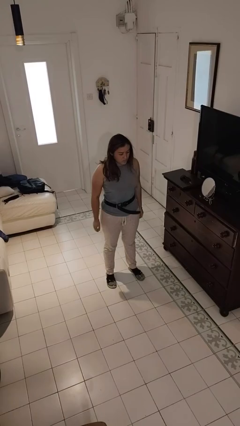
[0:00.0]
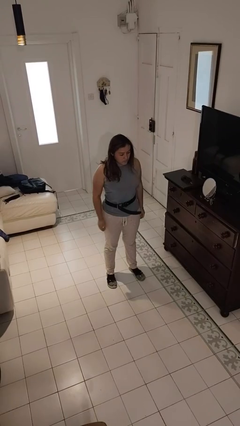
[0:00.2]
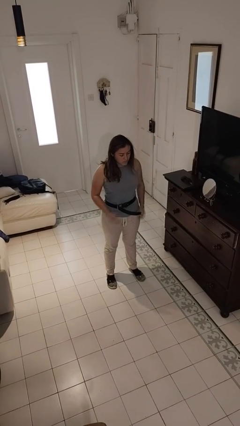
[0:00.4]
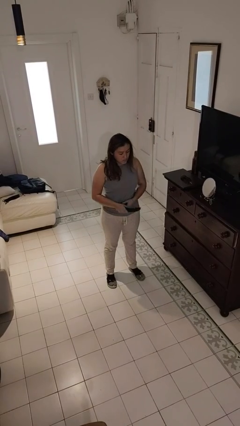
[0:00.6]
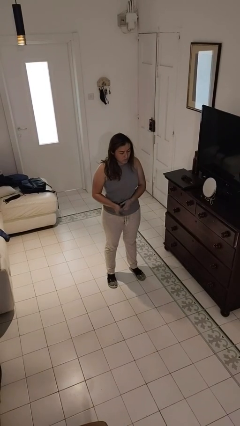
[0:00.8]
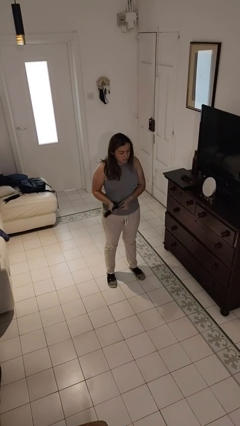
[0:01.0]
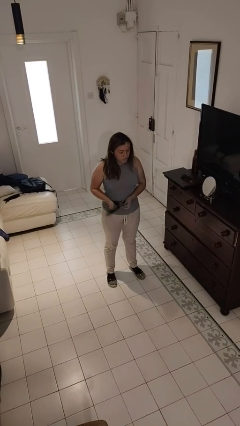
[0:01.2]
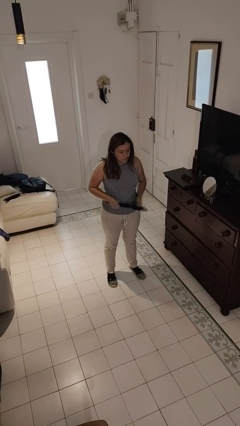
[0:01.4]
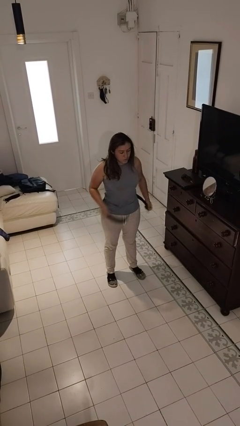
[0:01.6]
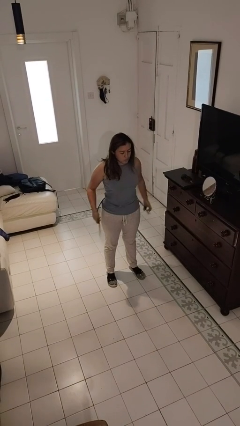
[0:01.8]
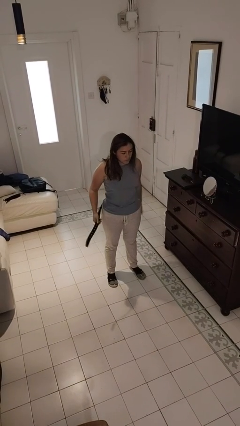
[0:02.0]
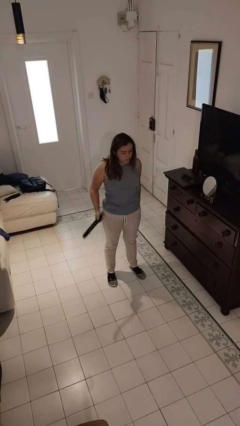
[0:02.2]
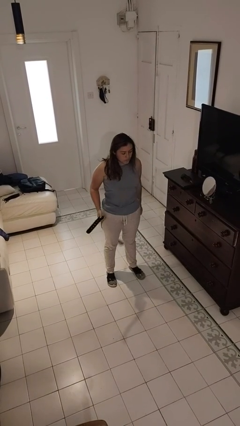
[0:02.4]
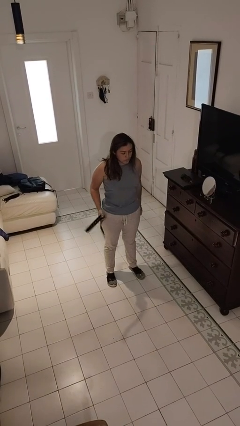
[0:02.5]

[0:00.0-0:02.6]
person takes off belt

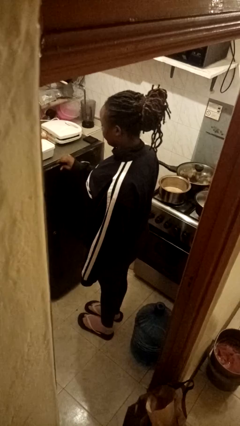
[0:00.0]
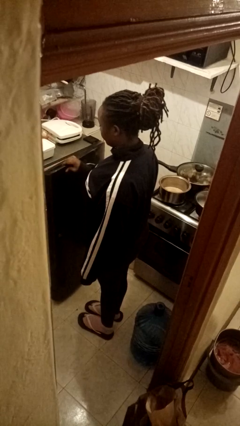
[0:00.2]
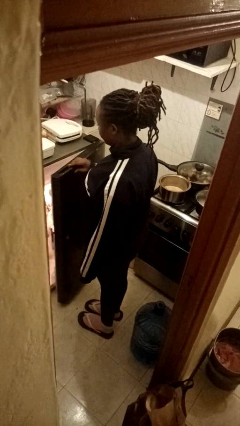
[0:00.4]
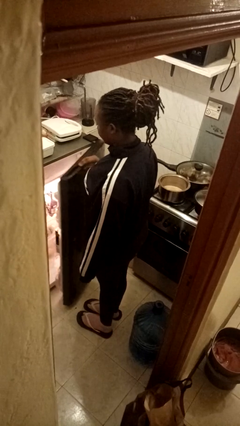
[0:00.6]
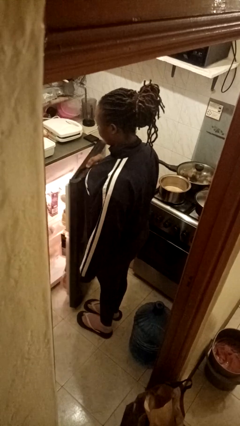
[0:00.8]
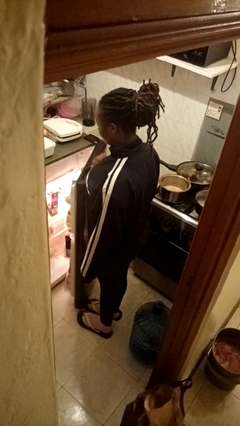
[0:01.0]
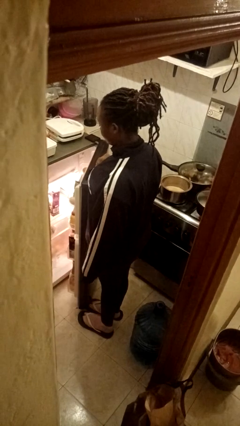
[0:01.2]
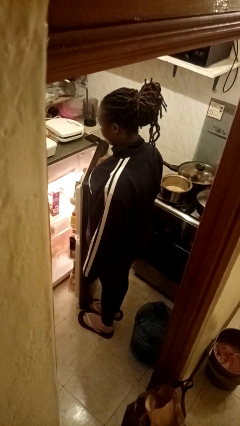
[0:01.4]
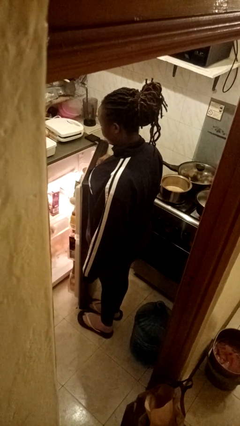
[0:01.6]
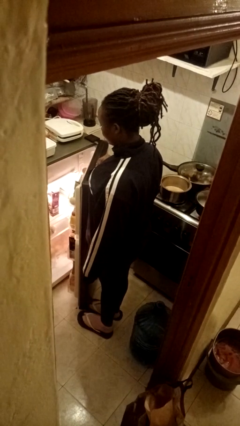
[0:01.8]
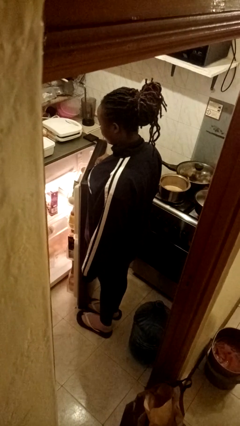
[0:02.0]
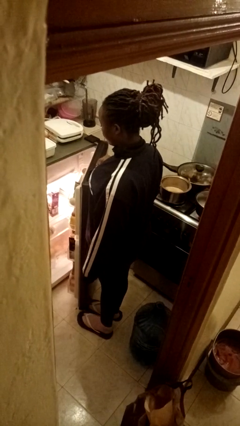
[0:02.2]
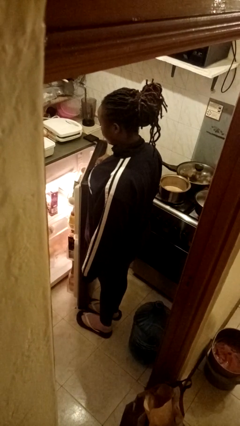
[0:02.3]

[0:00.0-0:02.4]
person opens refrigerator

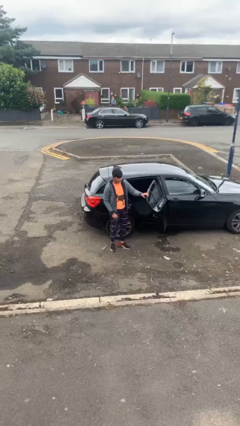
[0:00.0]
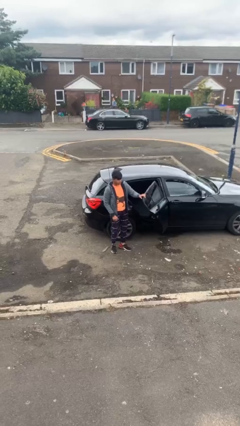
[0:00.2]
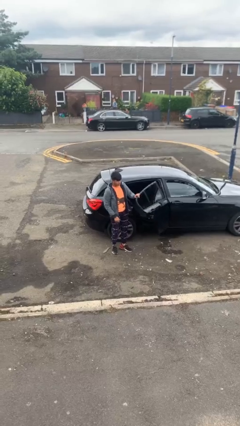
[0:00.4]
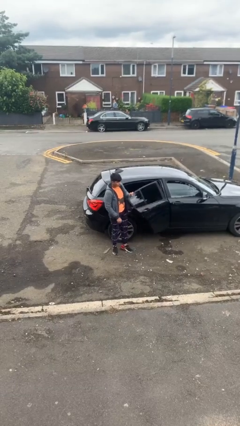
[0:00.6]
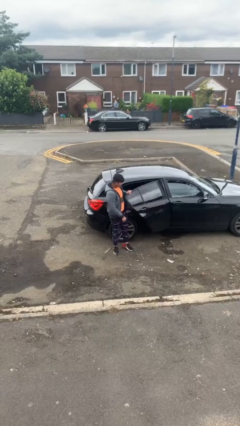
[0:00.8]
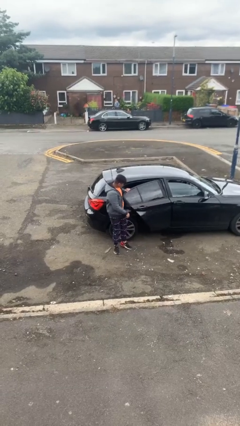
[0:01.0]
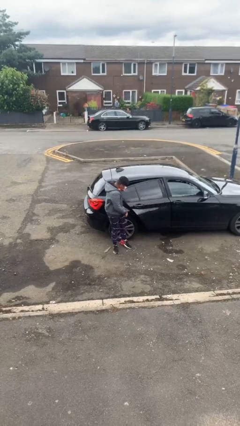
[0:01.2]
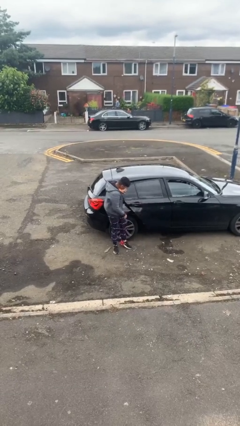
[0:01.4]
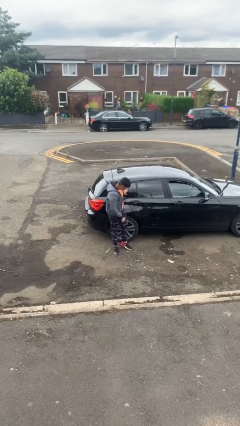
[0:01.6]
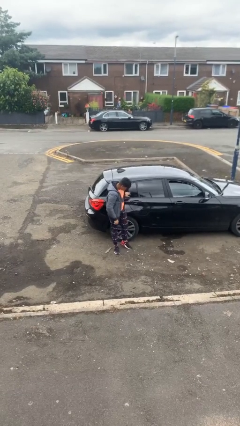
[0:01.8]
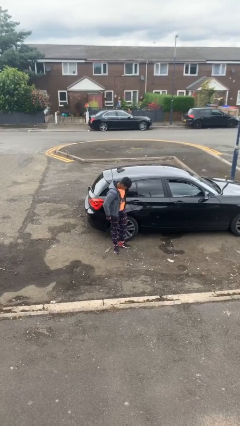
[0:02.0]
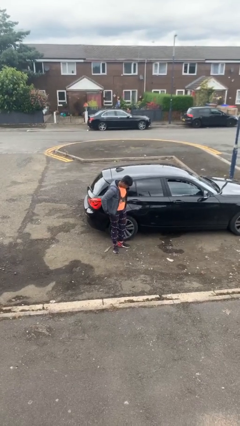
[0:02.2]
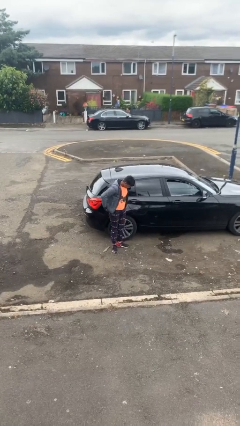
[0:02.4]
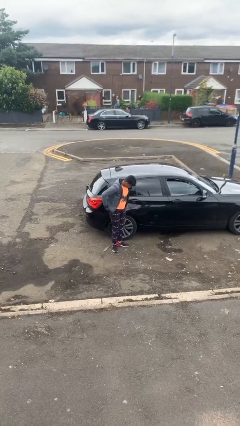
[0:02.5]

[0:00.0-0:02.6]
person closes car door

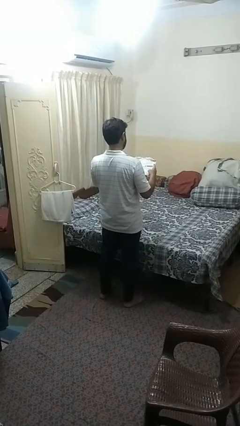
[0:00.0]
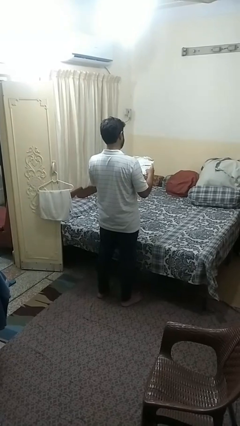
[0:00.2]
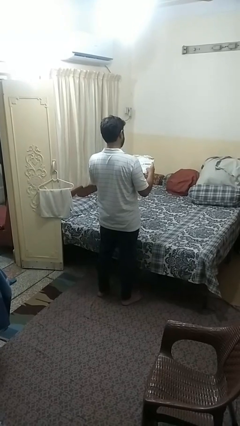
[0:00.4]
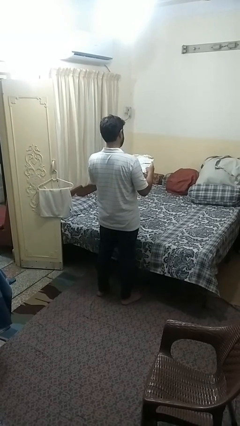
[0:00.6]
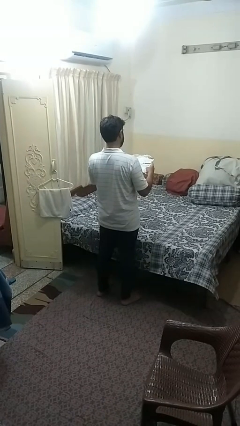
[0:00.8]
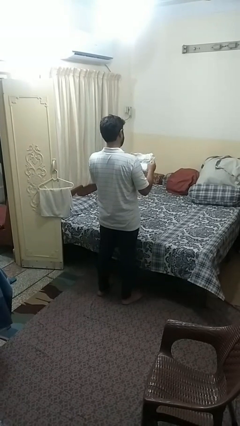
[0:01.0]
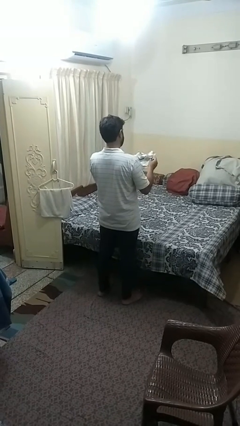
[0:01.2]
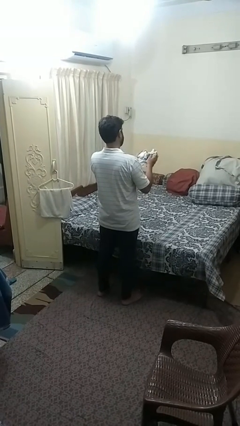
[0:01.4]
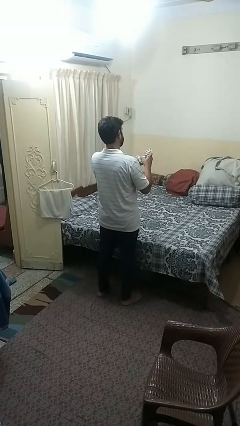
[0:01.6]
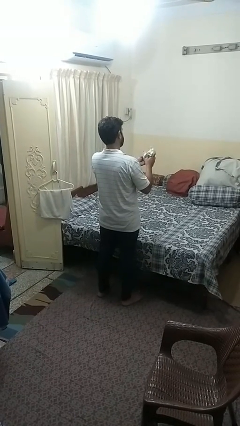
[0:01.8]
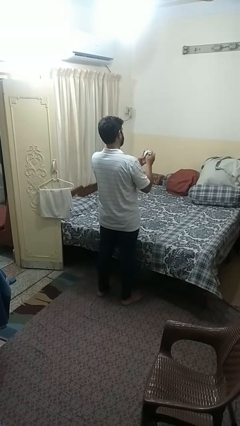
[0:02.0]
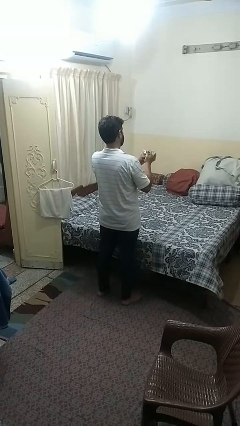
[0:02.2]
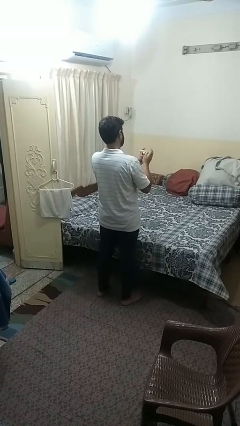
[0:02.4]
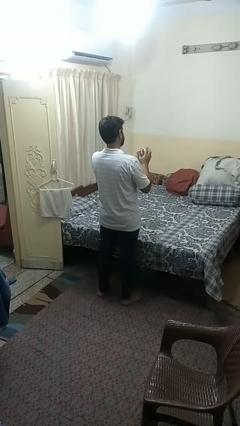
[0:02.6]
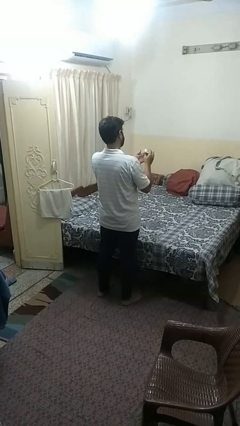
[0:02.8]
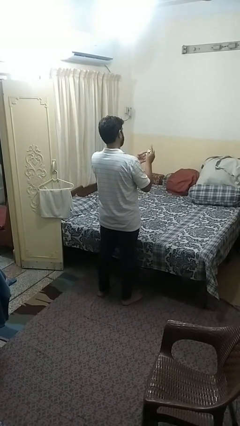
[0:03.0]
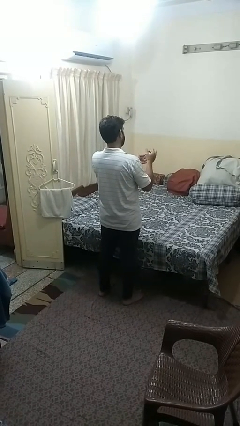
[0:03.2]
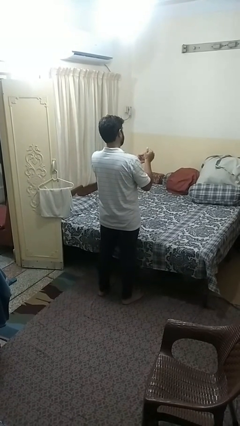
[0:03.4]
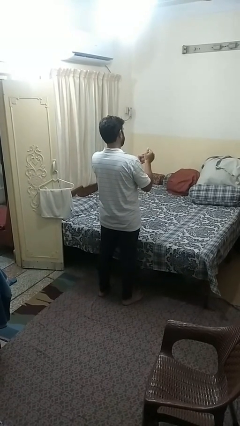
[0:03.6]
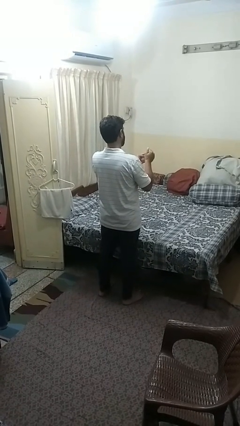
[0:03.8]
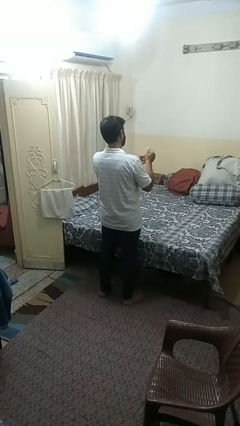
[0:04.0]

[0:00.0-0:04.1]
person crumples paper

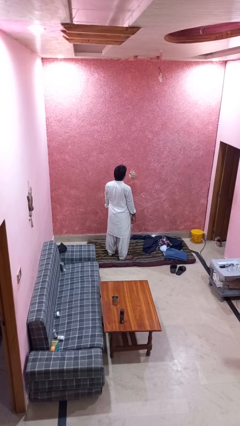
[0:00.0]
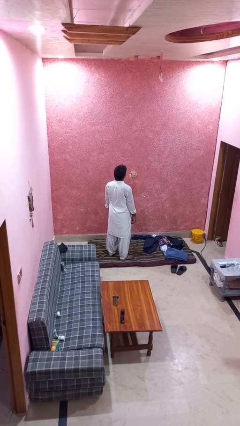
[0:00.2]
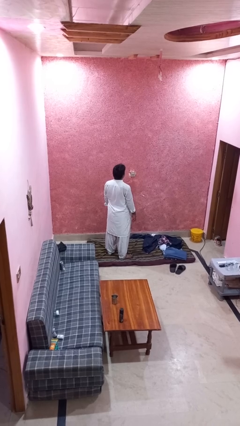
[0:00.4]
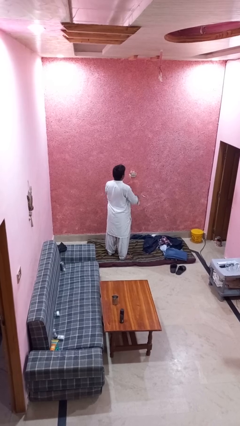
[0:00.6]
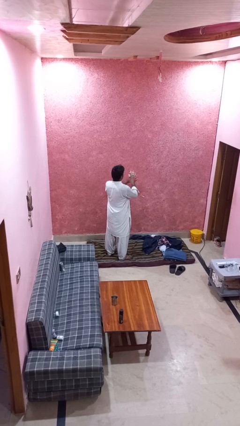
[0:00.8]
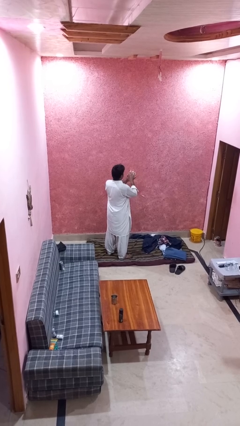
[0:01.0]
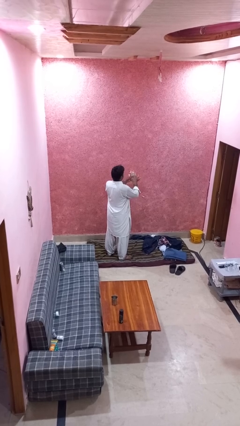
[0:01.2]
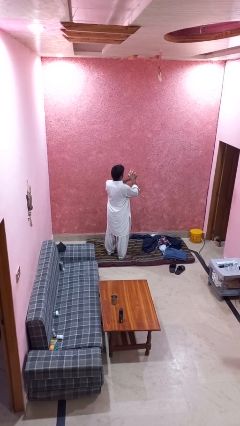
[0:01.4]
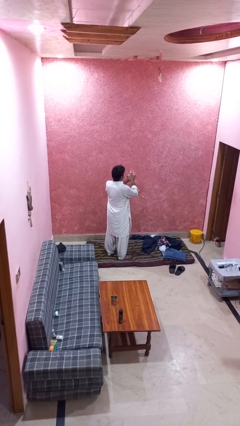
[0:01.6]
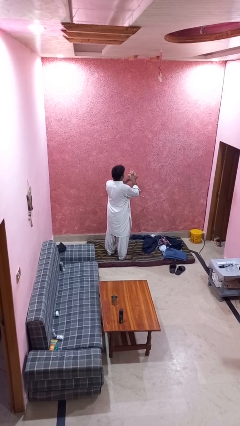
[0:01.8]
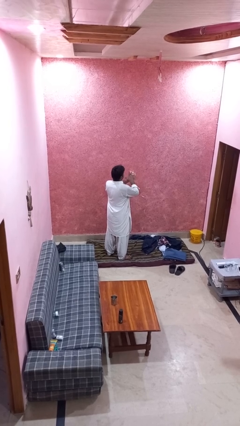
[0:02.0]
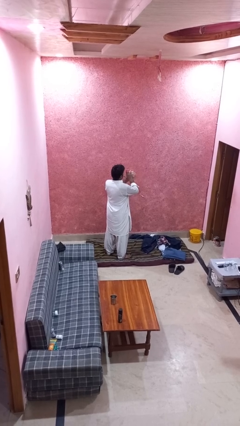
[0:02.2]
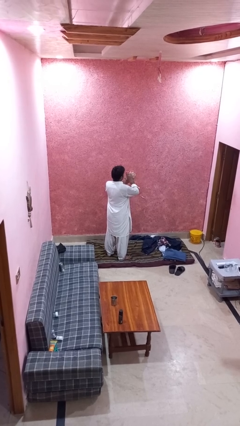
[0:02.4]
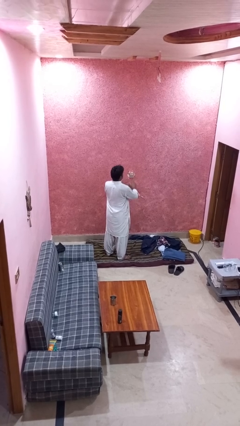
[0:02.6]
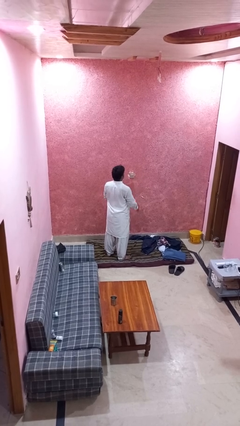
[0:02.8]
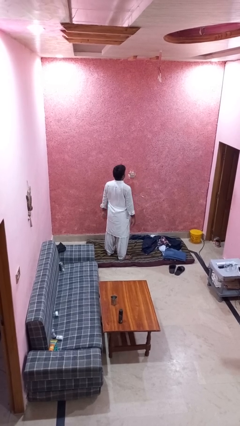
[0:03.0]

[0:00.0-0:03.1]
person snaps fingers

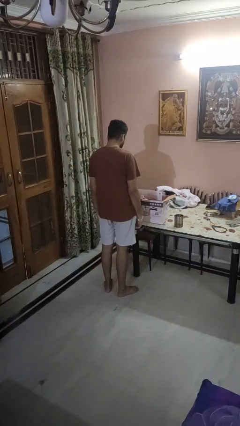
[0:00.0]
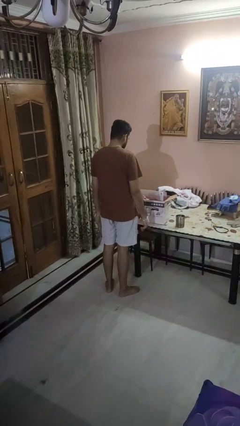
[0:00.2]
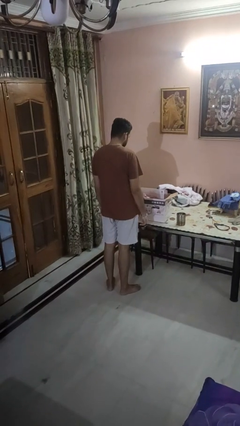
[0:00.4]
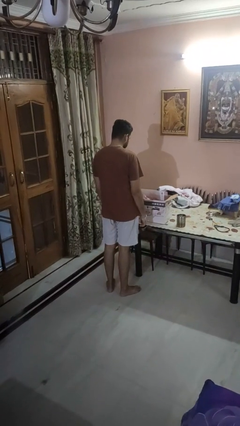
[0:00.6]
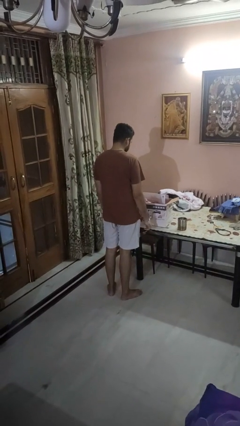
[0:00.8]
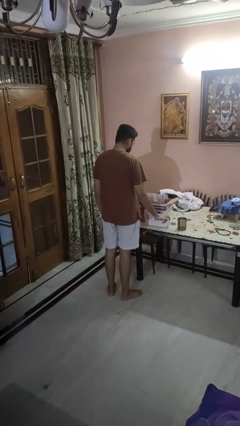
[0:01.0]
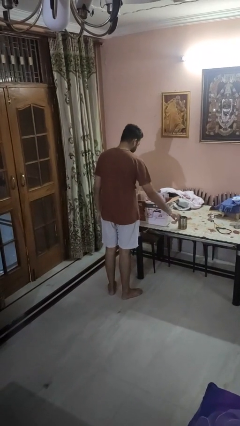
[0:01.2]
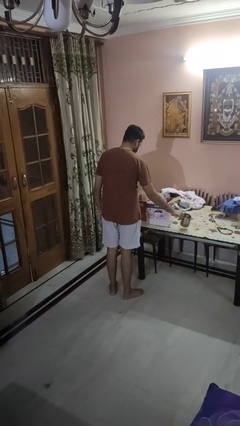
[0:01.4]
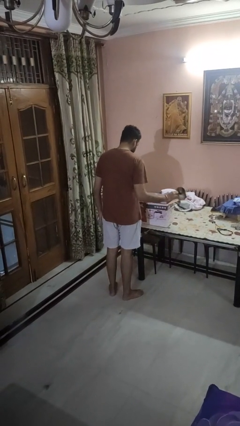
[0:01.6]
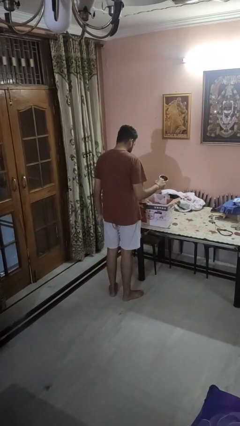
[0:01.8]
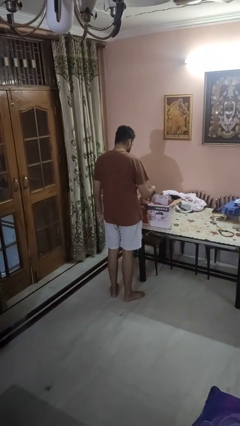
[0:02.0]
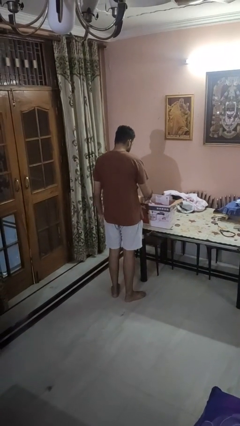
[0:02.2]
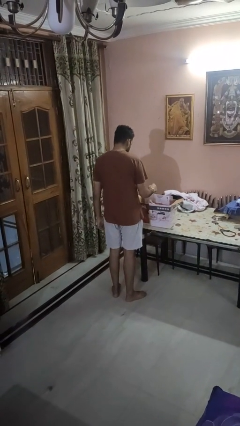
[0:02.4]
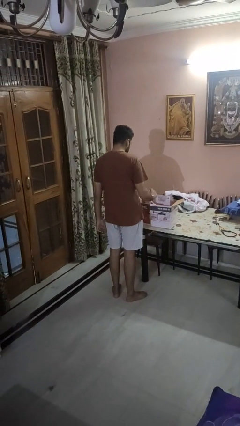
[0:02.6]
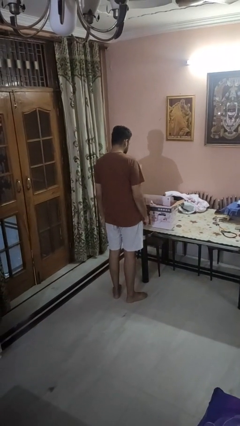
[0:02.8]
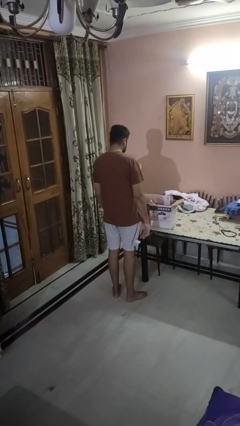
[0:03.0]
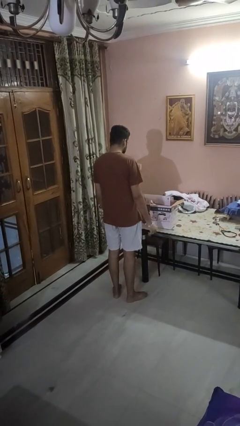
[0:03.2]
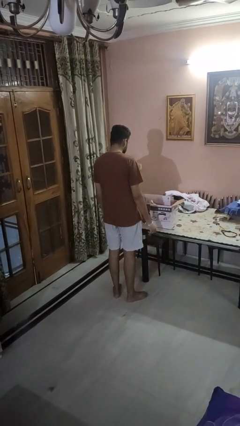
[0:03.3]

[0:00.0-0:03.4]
person puts object into box
